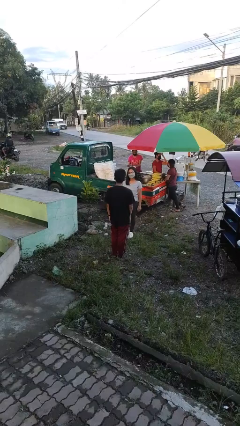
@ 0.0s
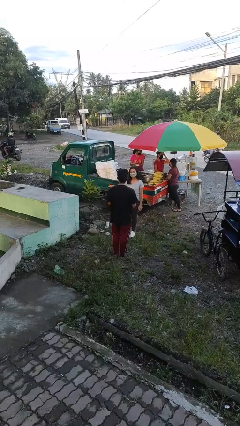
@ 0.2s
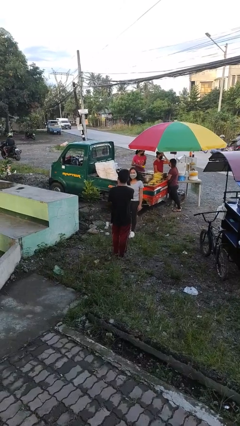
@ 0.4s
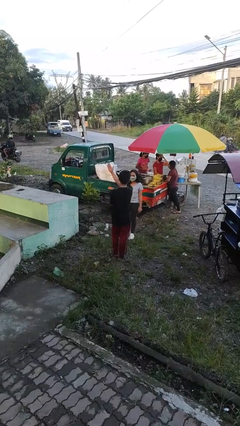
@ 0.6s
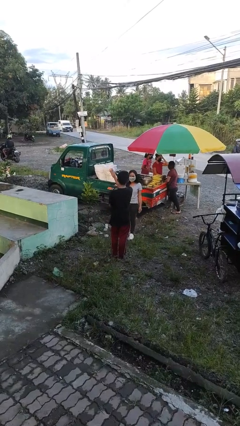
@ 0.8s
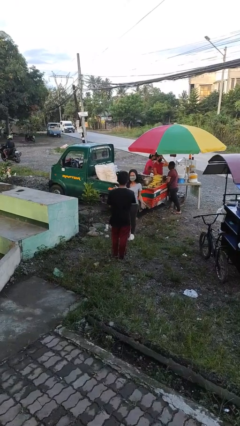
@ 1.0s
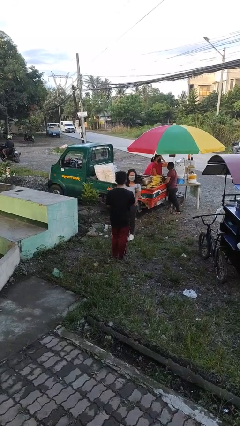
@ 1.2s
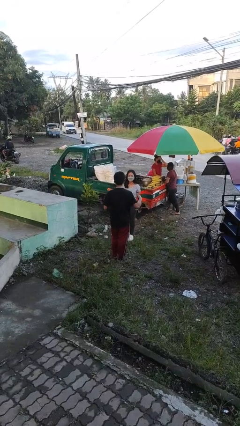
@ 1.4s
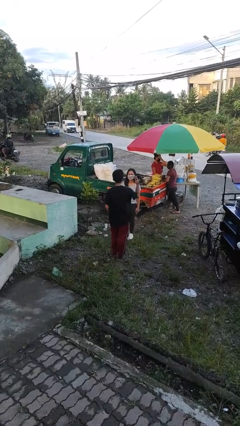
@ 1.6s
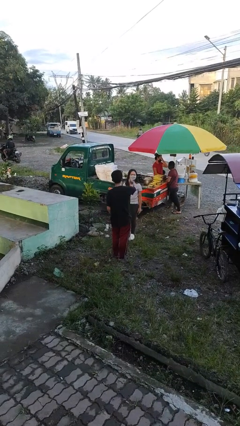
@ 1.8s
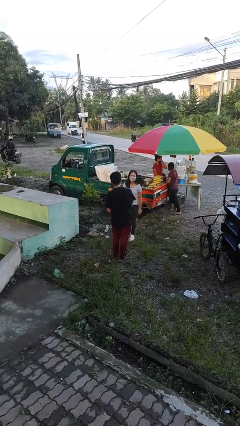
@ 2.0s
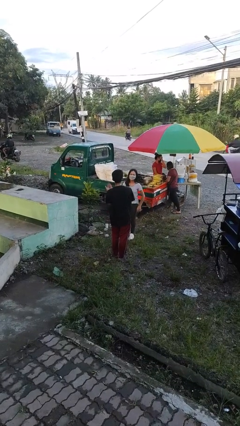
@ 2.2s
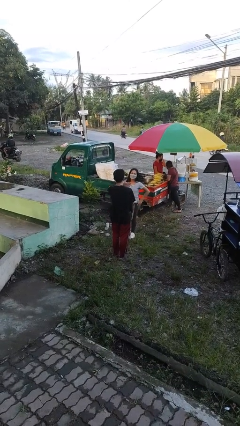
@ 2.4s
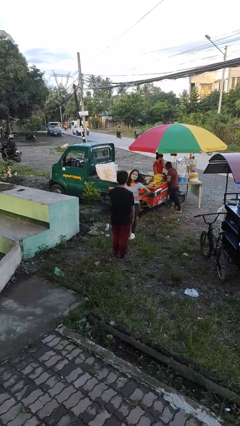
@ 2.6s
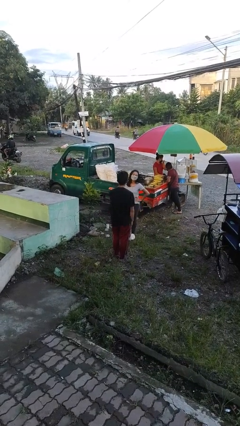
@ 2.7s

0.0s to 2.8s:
person talks to person

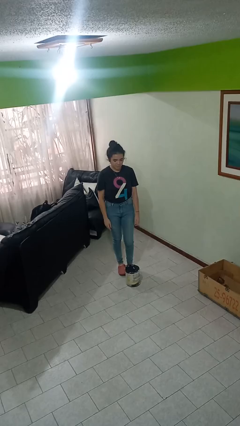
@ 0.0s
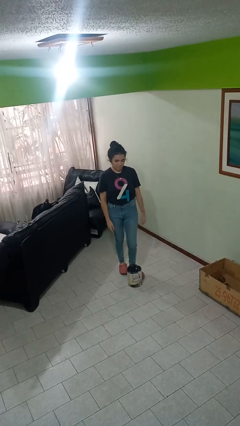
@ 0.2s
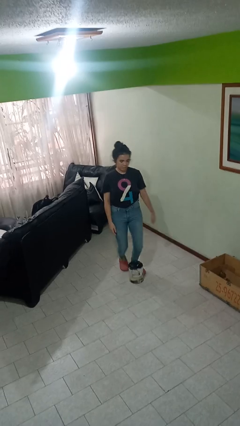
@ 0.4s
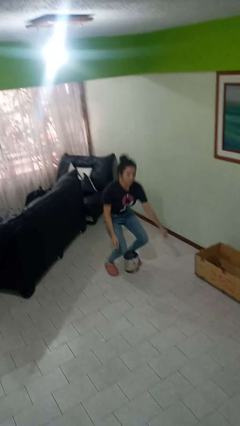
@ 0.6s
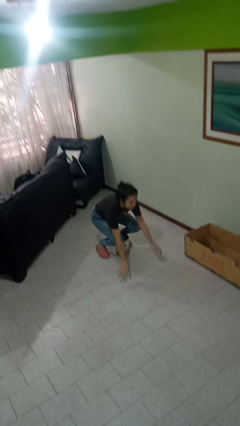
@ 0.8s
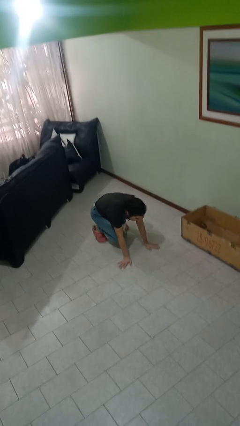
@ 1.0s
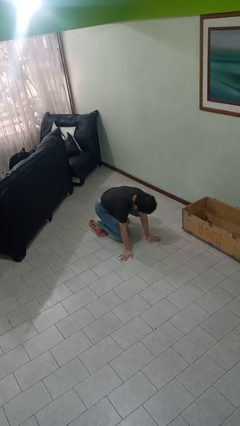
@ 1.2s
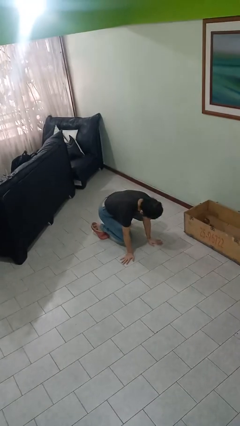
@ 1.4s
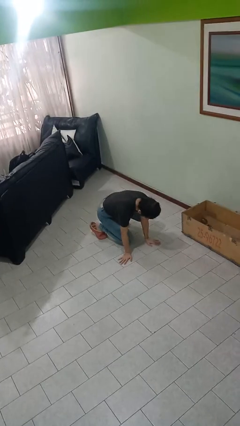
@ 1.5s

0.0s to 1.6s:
person trips on object on floor

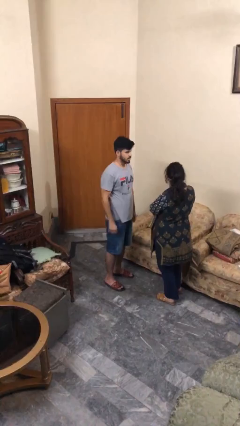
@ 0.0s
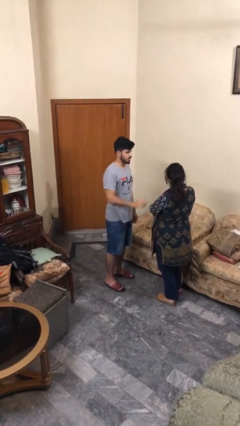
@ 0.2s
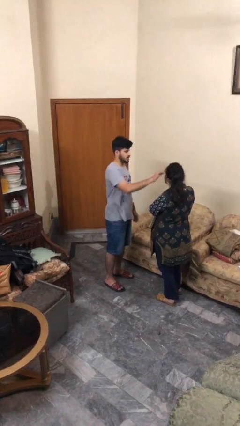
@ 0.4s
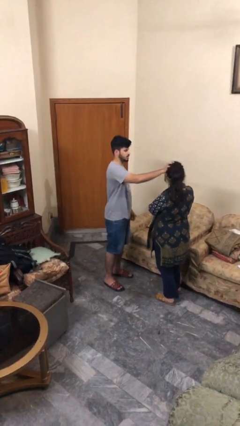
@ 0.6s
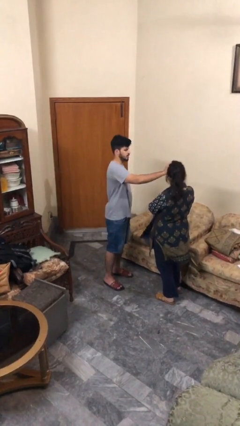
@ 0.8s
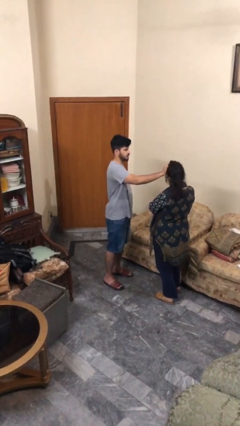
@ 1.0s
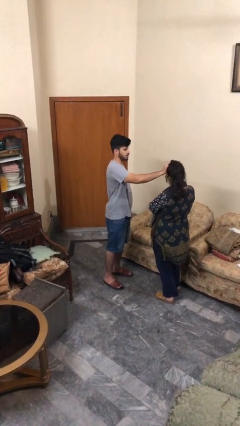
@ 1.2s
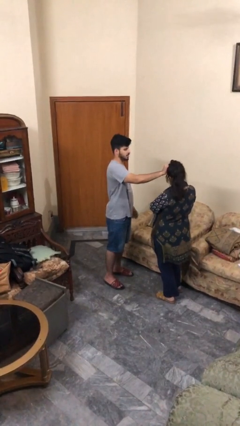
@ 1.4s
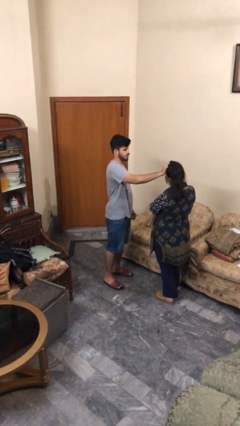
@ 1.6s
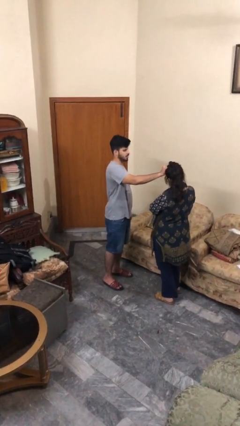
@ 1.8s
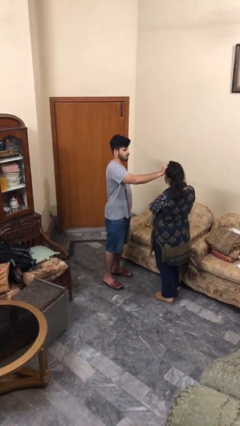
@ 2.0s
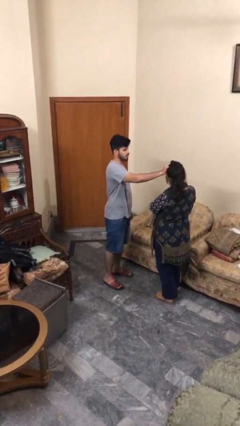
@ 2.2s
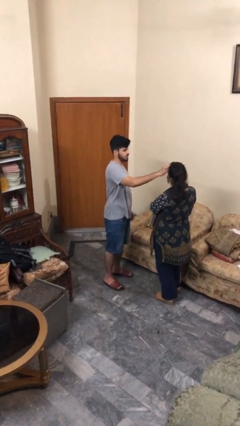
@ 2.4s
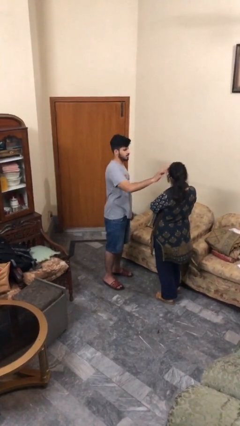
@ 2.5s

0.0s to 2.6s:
person grabs person by hair

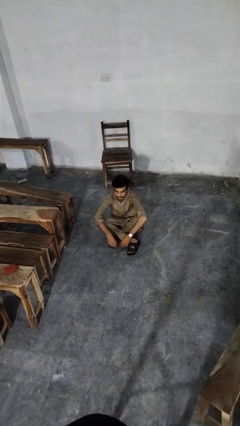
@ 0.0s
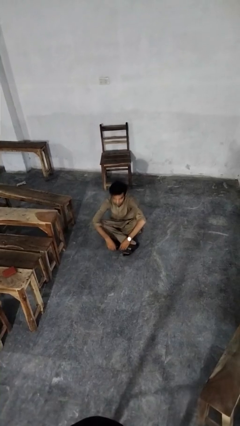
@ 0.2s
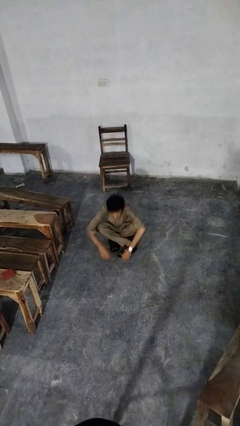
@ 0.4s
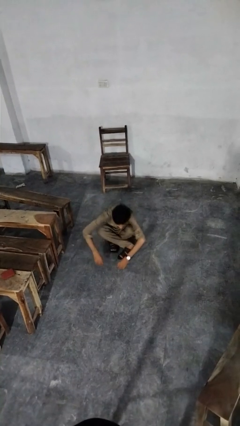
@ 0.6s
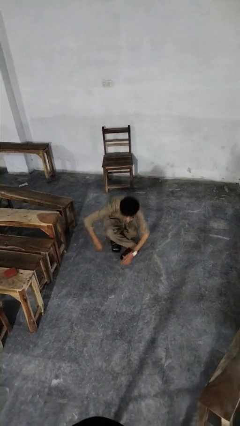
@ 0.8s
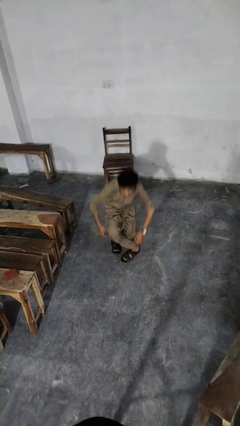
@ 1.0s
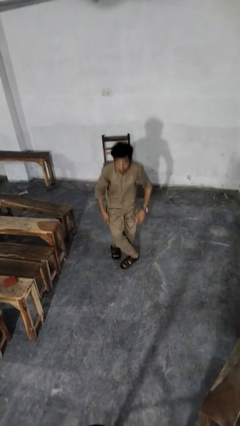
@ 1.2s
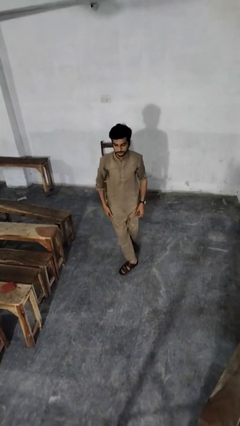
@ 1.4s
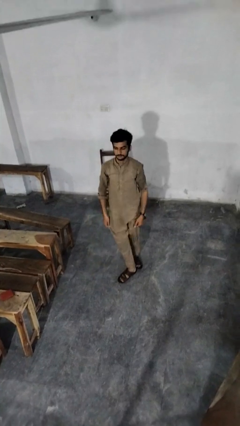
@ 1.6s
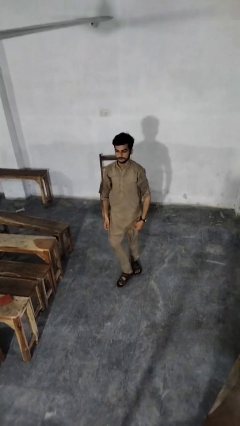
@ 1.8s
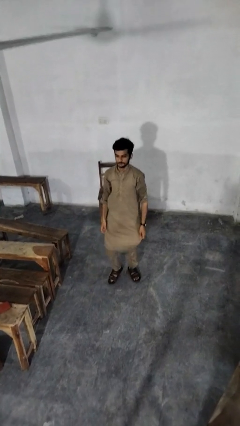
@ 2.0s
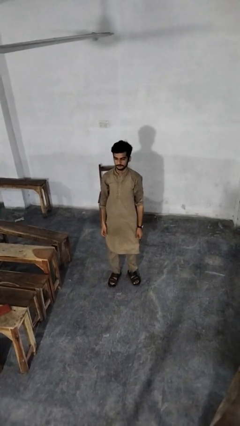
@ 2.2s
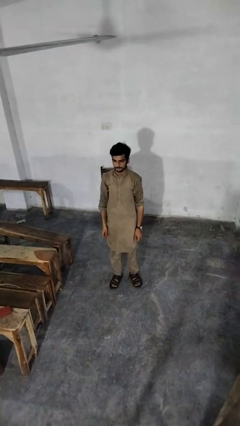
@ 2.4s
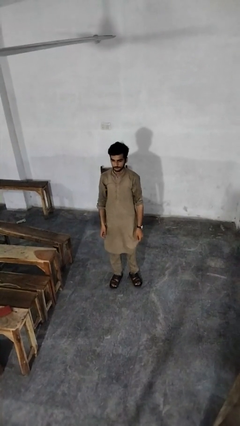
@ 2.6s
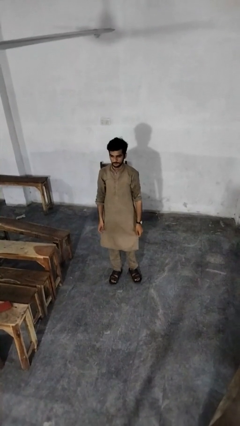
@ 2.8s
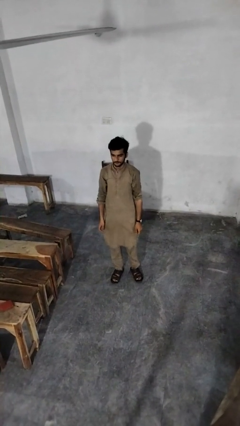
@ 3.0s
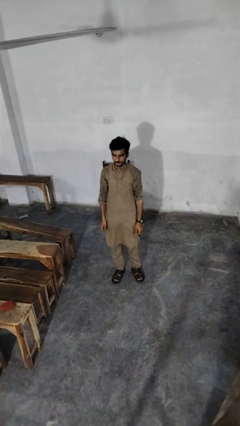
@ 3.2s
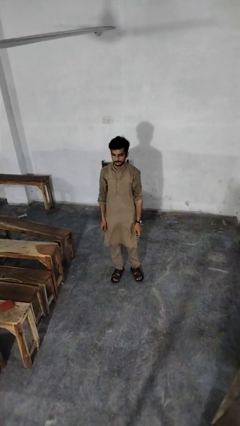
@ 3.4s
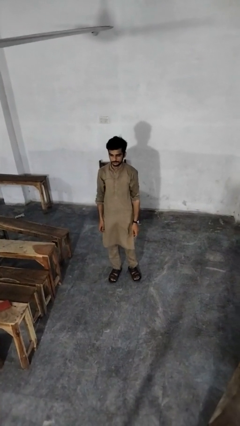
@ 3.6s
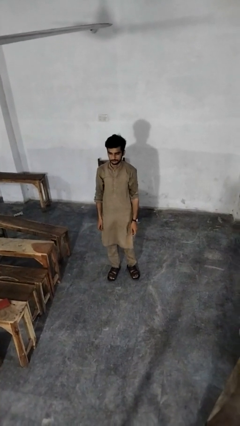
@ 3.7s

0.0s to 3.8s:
person stands up from floor

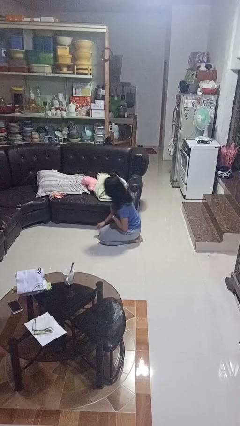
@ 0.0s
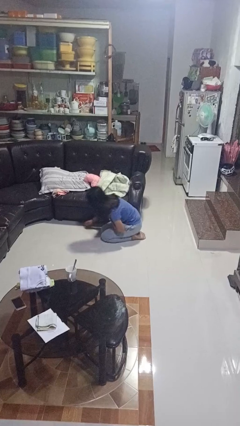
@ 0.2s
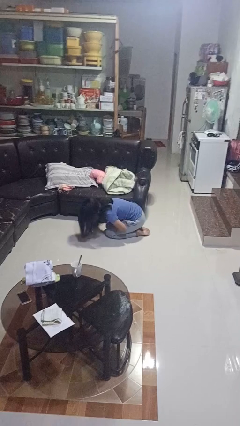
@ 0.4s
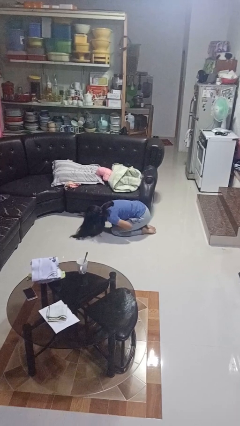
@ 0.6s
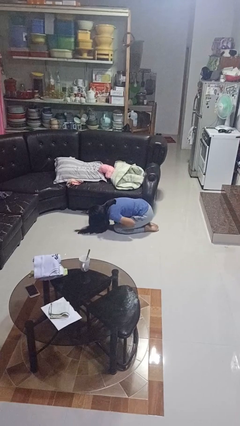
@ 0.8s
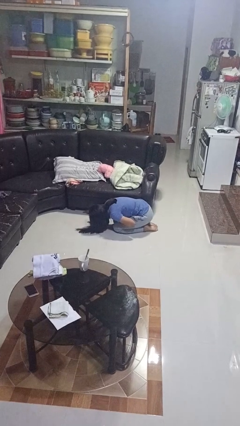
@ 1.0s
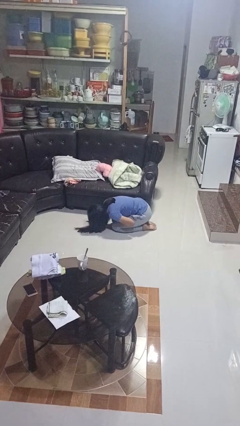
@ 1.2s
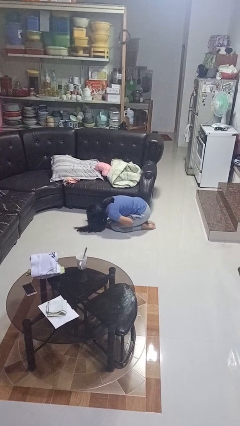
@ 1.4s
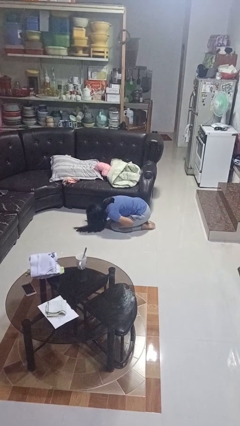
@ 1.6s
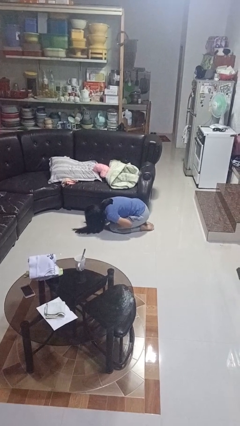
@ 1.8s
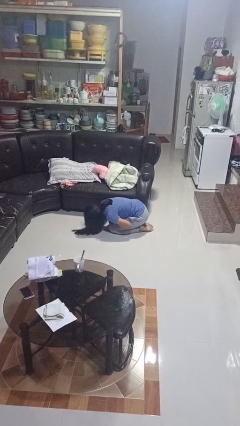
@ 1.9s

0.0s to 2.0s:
person searches under couch

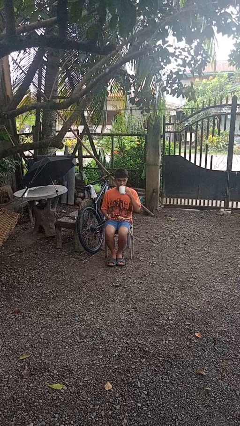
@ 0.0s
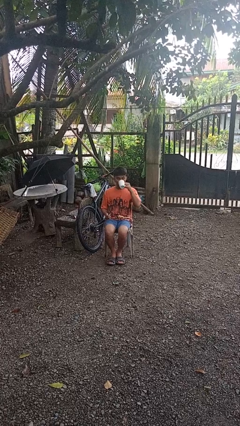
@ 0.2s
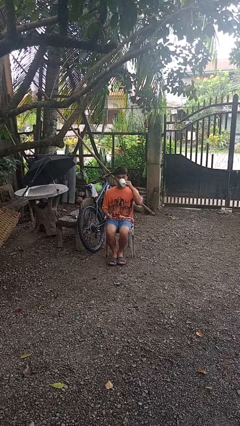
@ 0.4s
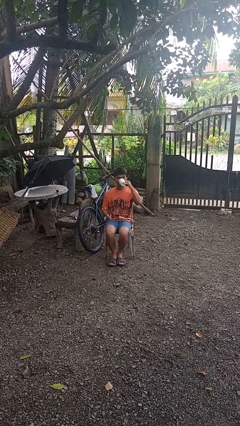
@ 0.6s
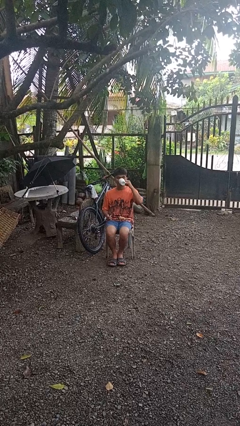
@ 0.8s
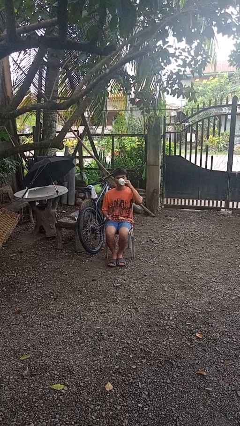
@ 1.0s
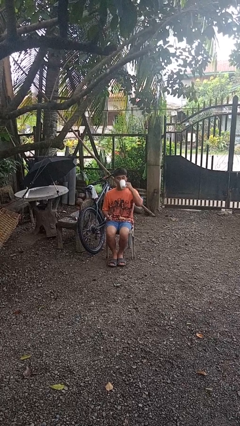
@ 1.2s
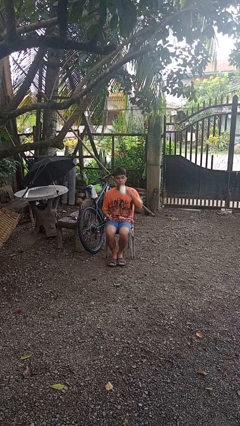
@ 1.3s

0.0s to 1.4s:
person drinks from mug

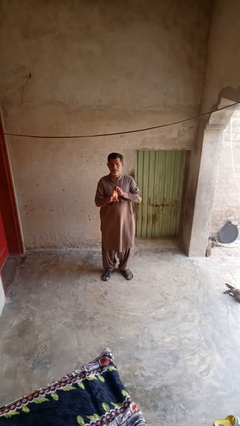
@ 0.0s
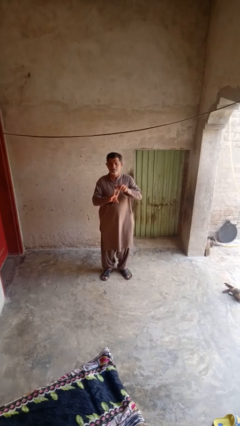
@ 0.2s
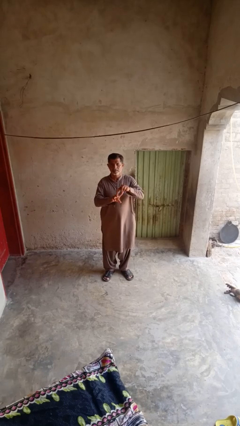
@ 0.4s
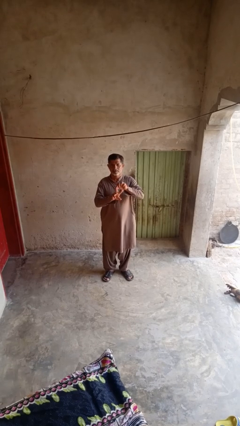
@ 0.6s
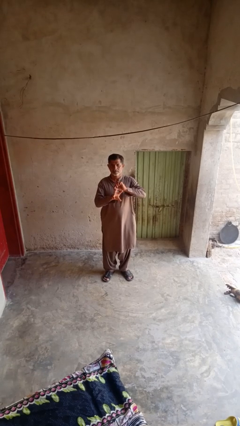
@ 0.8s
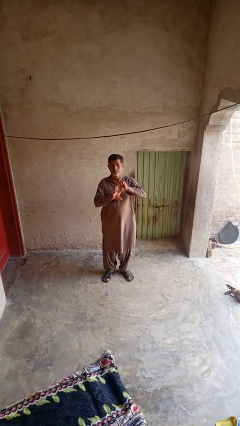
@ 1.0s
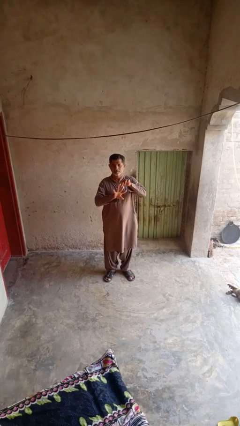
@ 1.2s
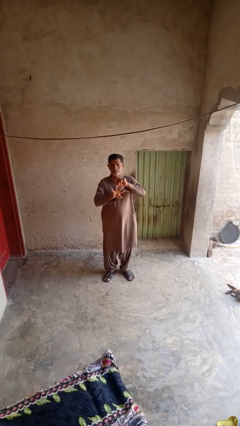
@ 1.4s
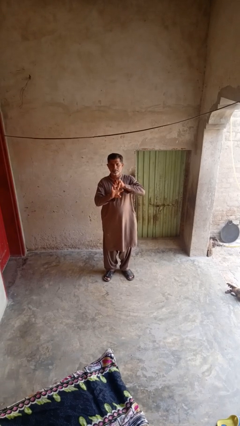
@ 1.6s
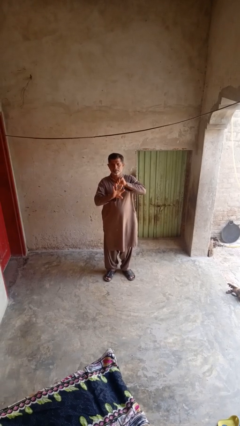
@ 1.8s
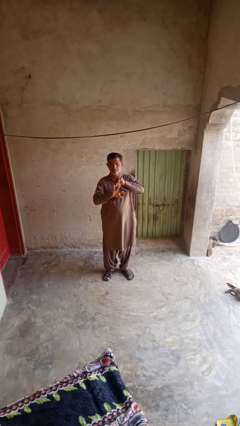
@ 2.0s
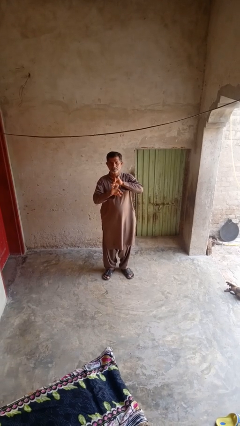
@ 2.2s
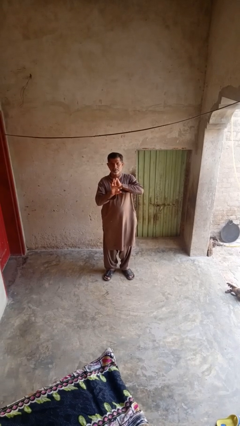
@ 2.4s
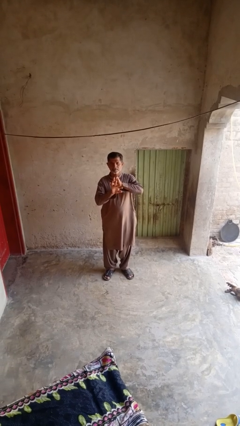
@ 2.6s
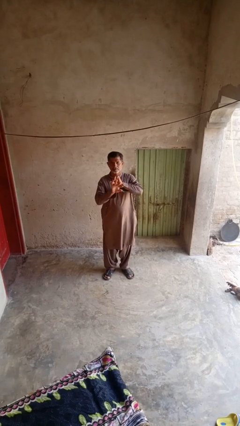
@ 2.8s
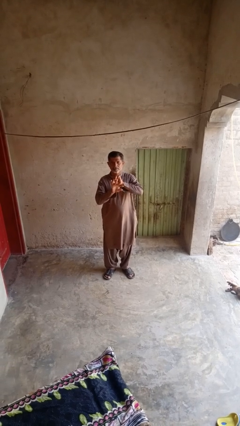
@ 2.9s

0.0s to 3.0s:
person cracks knuckles
